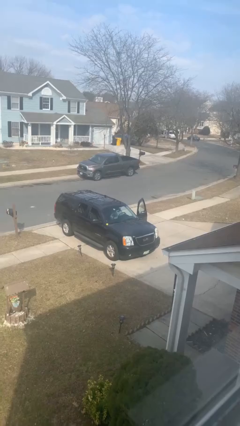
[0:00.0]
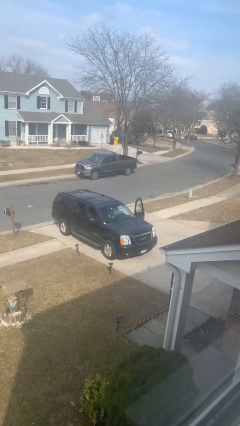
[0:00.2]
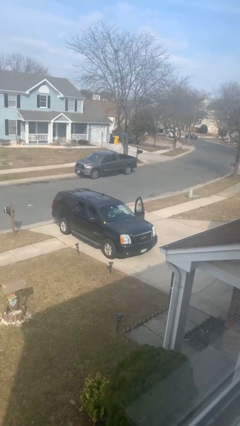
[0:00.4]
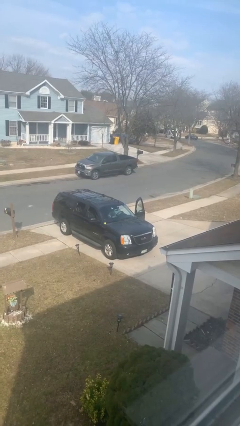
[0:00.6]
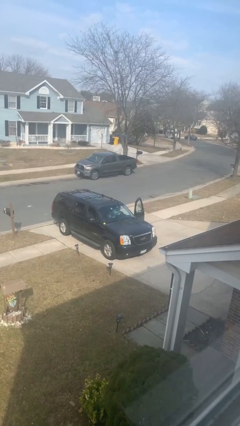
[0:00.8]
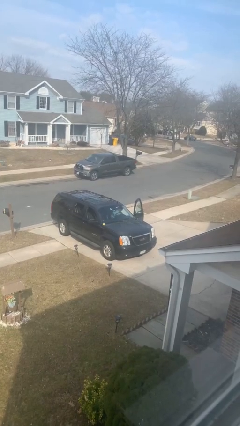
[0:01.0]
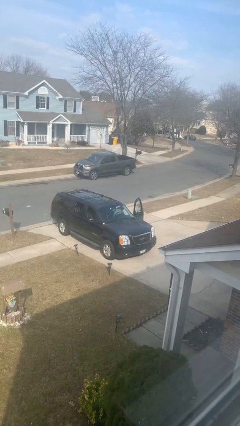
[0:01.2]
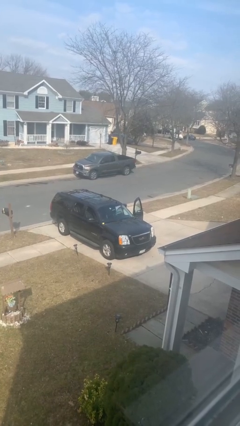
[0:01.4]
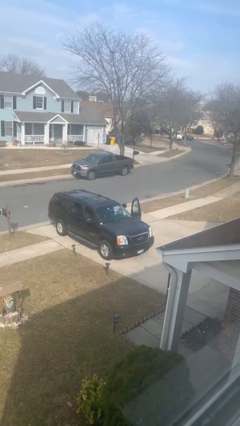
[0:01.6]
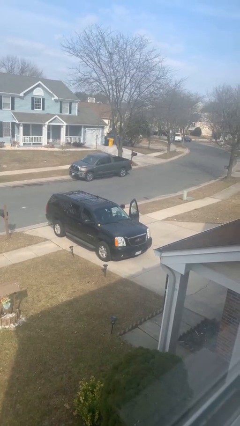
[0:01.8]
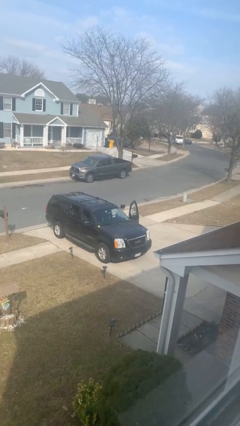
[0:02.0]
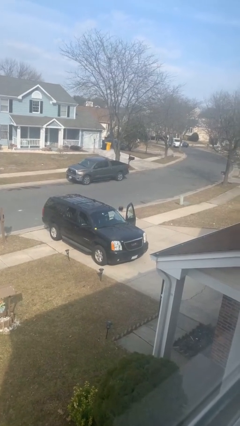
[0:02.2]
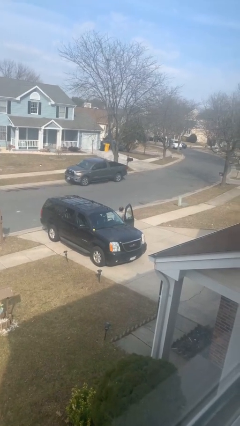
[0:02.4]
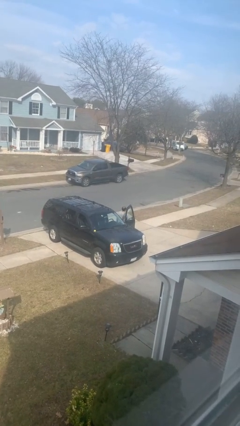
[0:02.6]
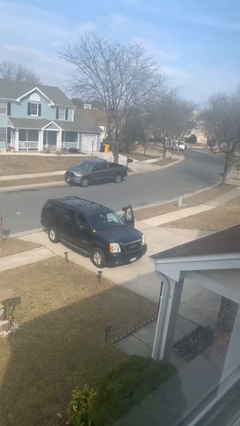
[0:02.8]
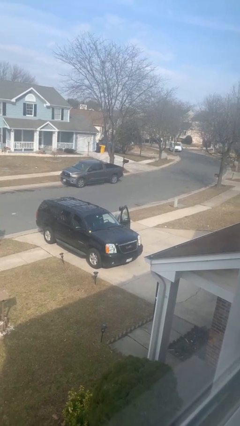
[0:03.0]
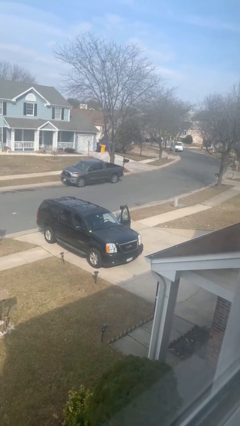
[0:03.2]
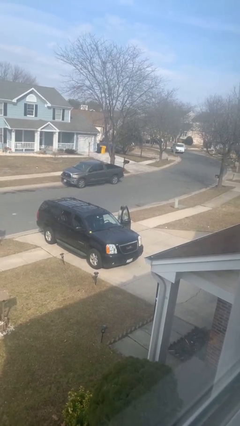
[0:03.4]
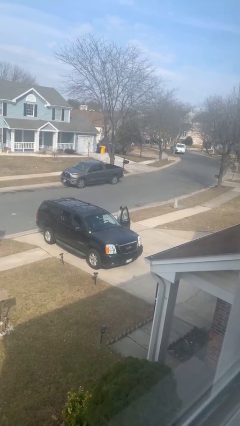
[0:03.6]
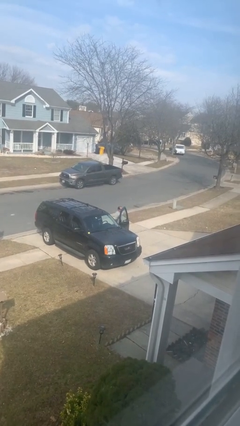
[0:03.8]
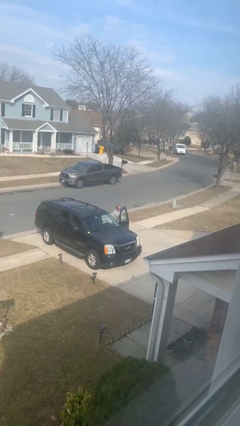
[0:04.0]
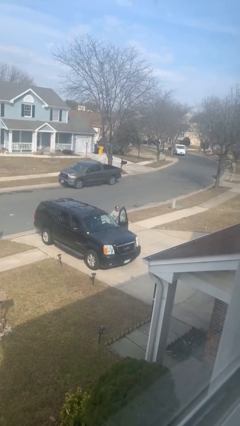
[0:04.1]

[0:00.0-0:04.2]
person exits car

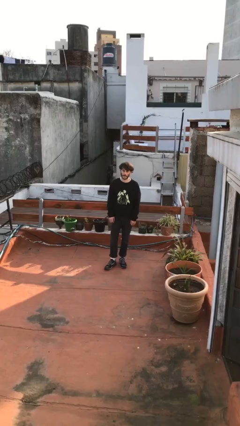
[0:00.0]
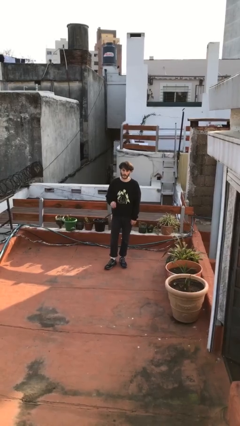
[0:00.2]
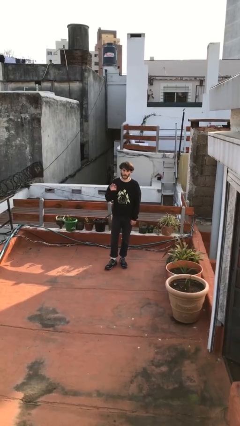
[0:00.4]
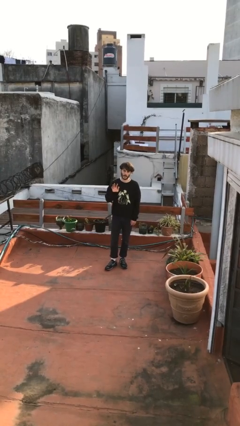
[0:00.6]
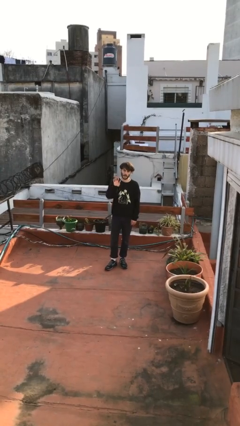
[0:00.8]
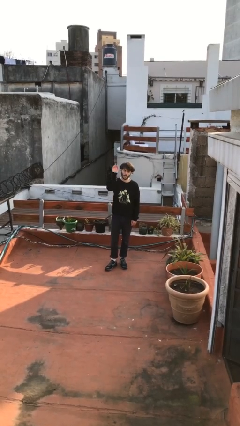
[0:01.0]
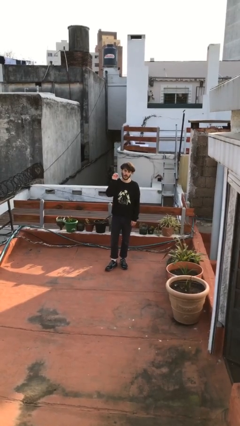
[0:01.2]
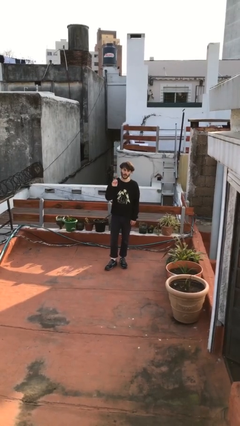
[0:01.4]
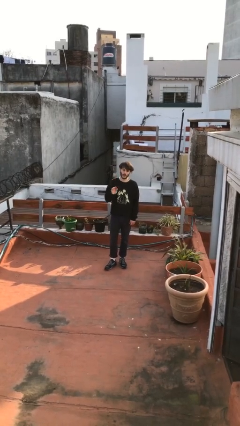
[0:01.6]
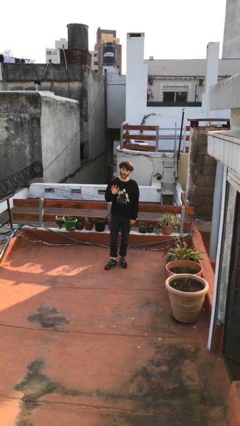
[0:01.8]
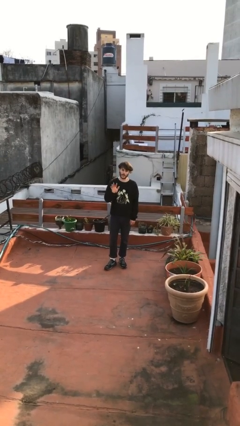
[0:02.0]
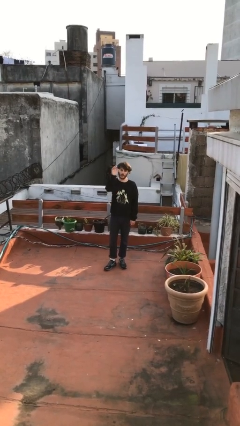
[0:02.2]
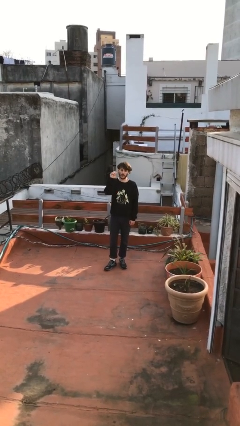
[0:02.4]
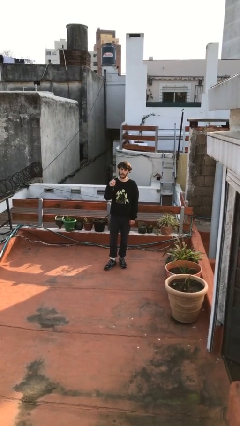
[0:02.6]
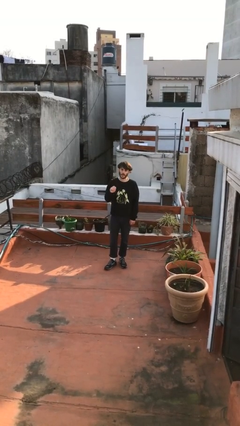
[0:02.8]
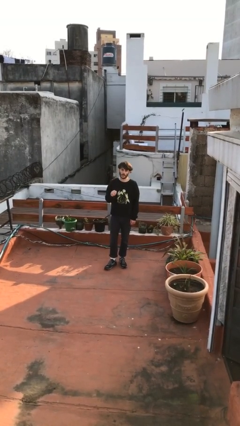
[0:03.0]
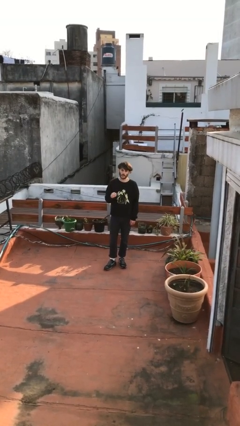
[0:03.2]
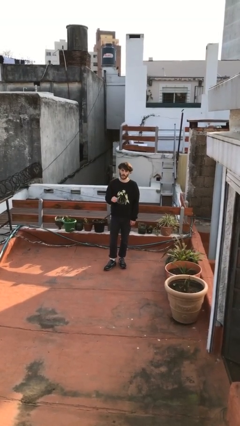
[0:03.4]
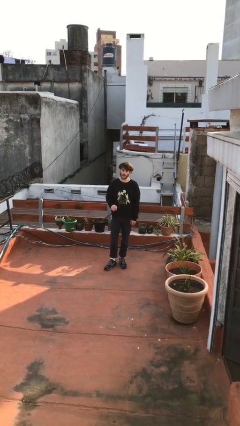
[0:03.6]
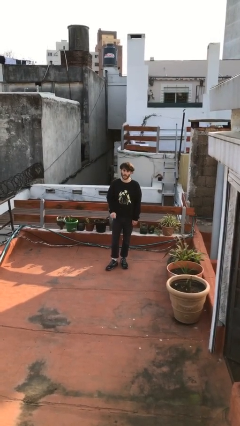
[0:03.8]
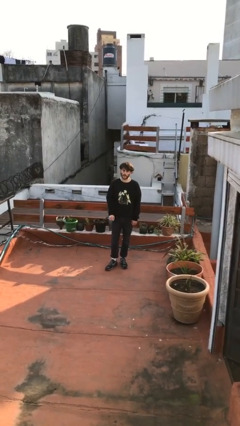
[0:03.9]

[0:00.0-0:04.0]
person gestures swipe up

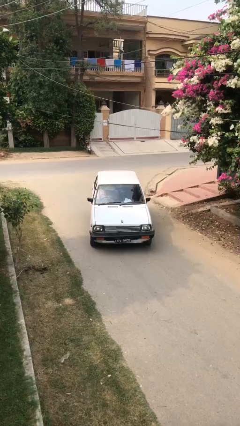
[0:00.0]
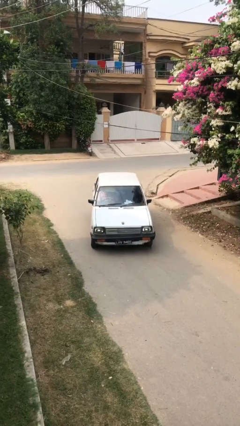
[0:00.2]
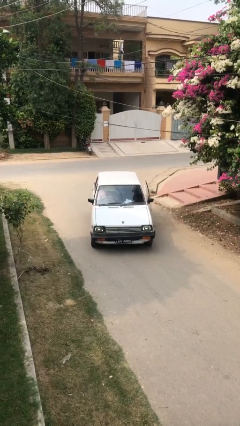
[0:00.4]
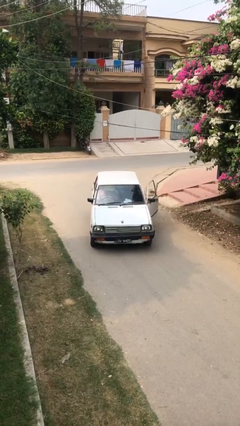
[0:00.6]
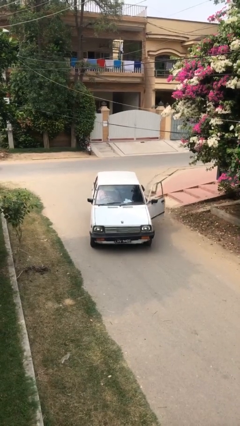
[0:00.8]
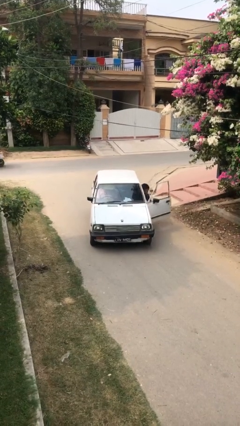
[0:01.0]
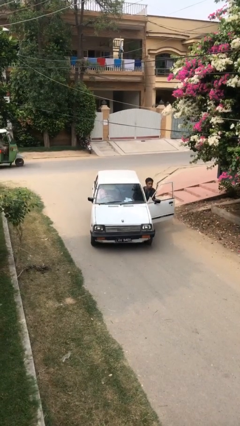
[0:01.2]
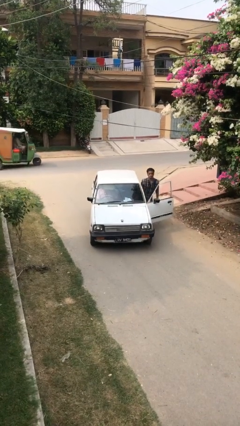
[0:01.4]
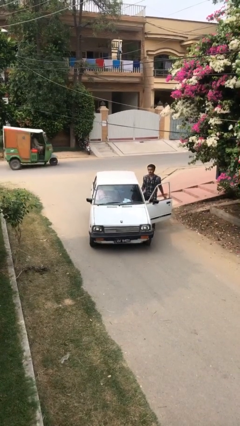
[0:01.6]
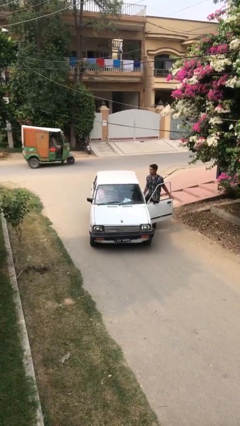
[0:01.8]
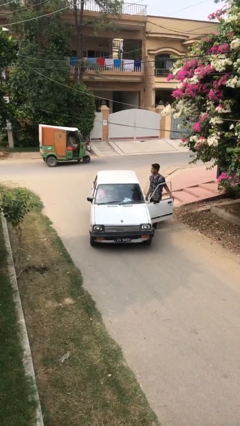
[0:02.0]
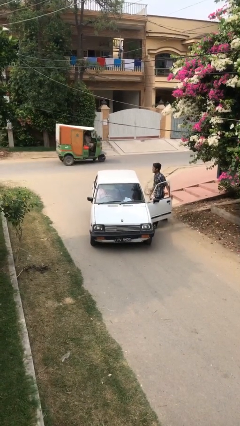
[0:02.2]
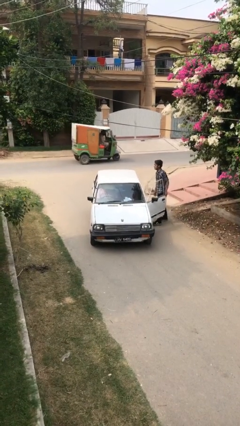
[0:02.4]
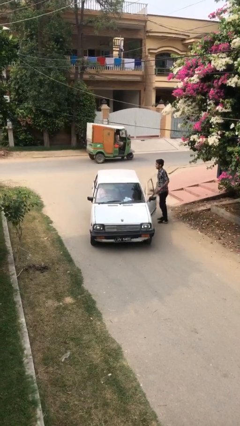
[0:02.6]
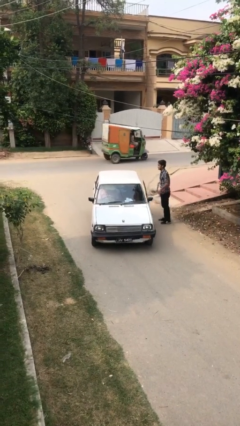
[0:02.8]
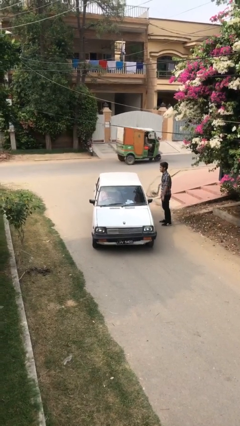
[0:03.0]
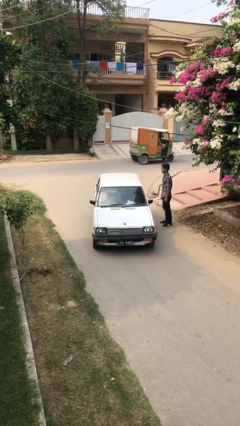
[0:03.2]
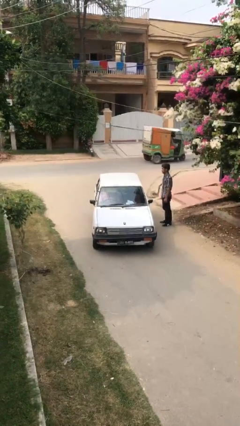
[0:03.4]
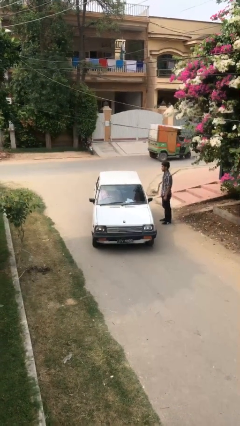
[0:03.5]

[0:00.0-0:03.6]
car drops off person

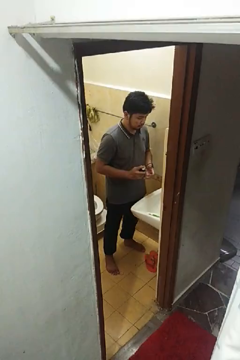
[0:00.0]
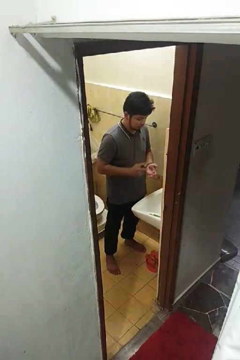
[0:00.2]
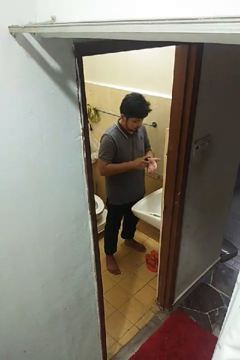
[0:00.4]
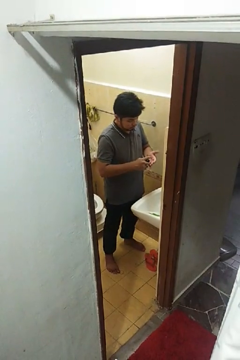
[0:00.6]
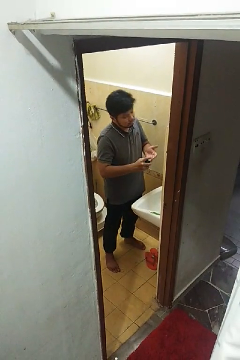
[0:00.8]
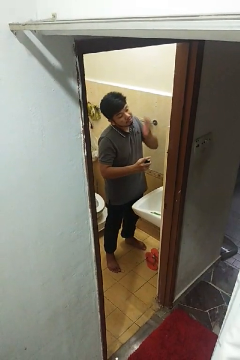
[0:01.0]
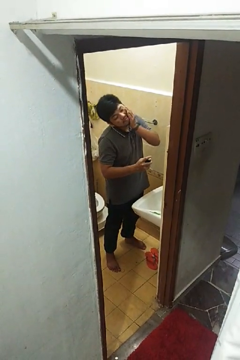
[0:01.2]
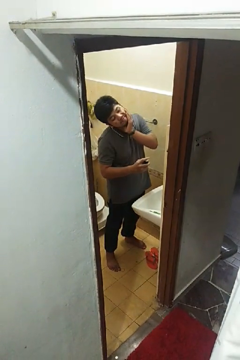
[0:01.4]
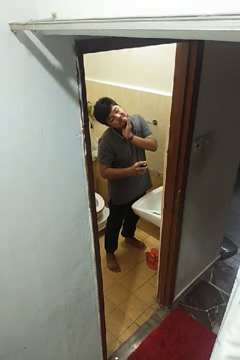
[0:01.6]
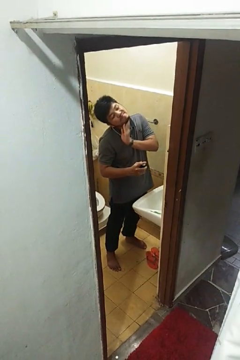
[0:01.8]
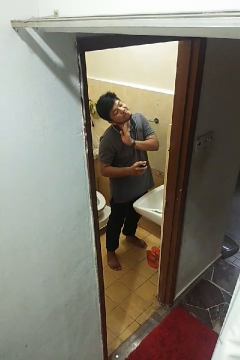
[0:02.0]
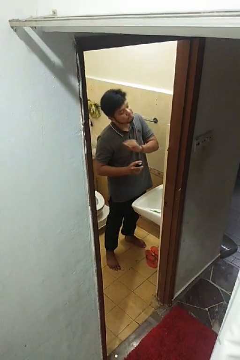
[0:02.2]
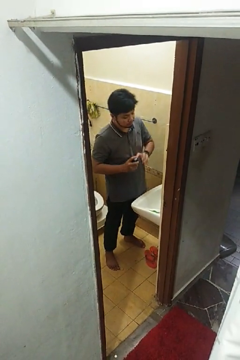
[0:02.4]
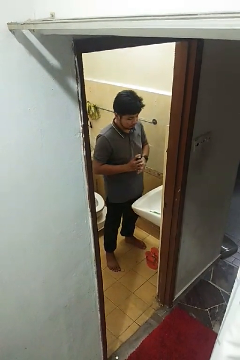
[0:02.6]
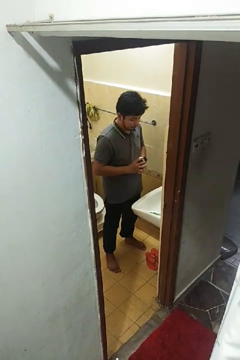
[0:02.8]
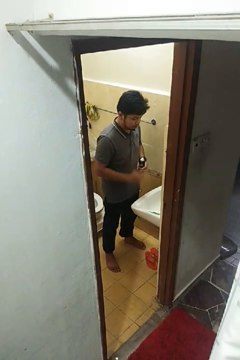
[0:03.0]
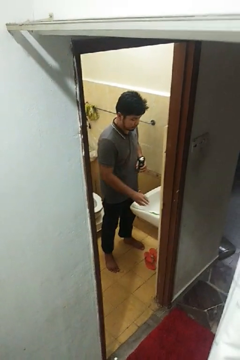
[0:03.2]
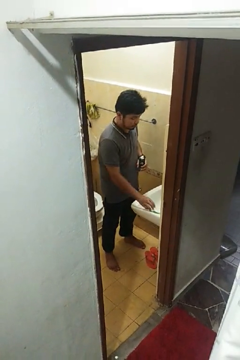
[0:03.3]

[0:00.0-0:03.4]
person applies shaving cream

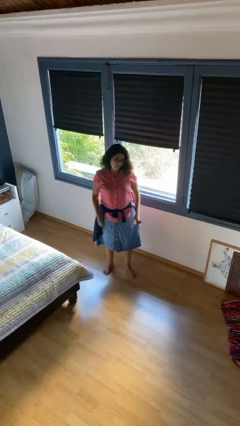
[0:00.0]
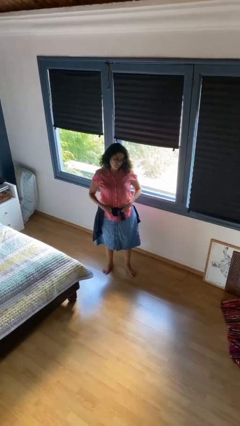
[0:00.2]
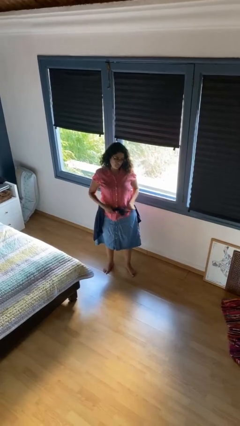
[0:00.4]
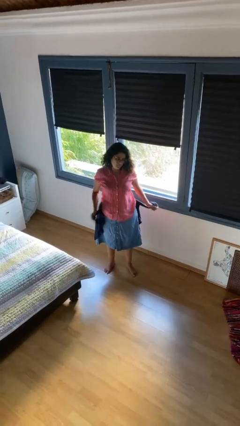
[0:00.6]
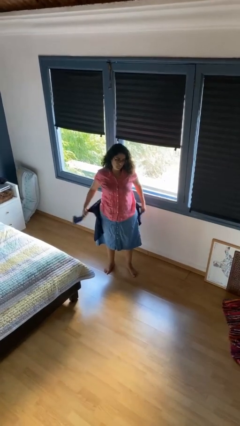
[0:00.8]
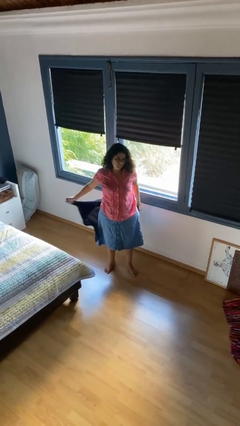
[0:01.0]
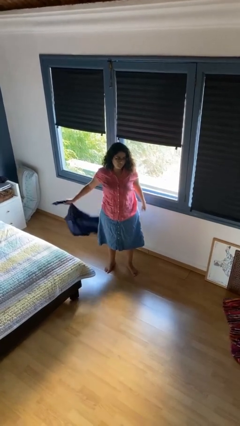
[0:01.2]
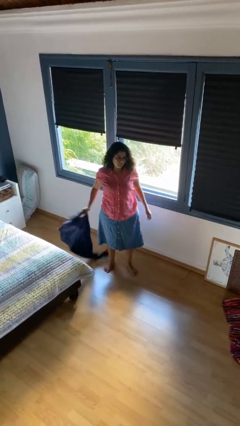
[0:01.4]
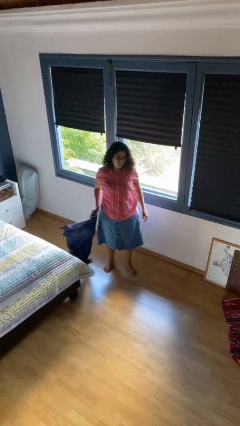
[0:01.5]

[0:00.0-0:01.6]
person unties jacket around waist

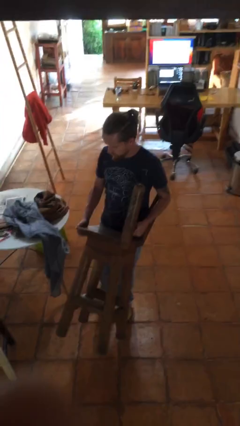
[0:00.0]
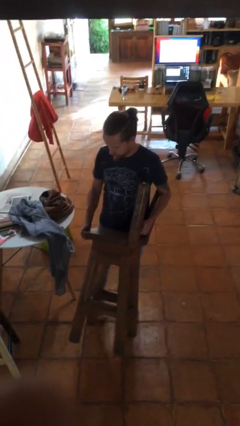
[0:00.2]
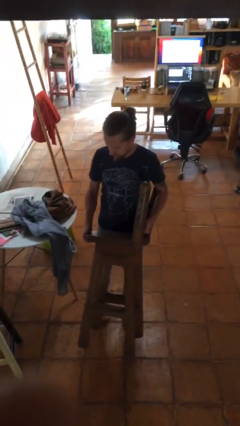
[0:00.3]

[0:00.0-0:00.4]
person carries furniture

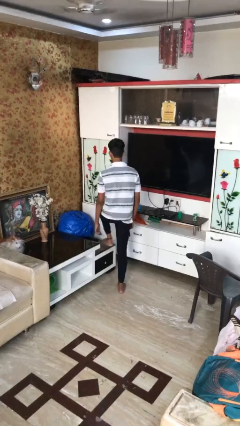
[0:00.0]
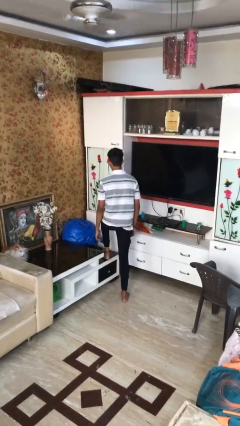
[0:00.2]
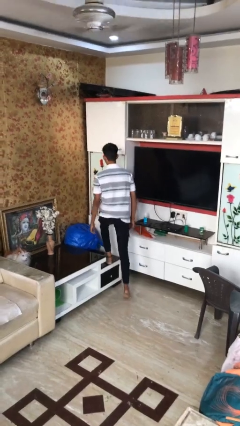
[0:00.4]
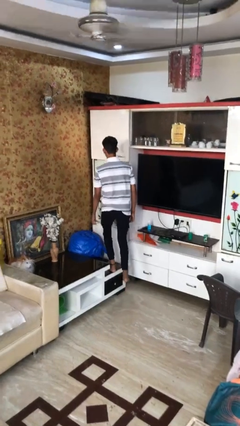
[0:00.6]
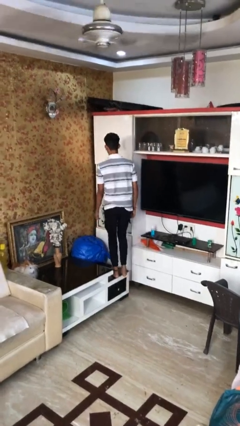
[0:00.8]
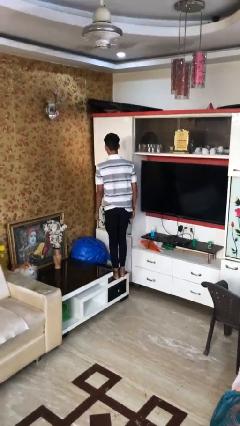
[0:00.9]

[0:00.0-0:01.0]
person climbs on table
